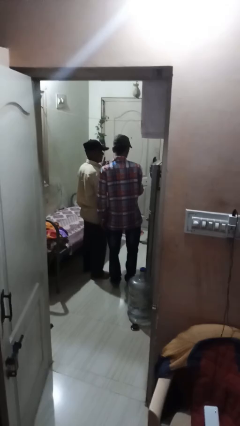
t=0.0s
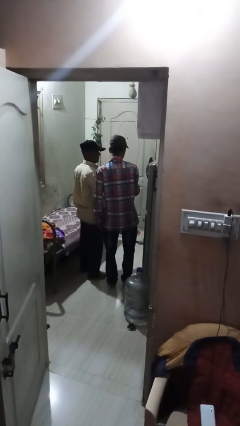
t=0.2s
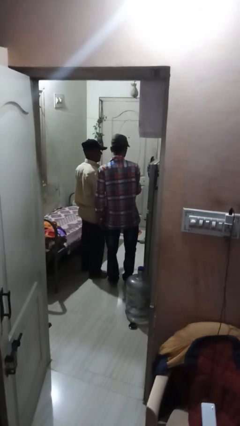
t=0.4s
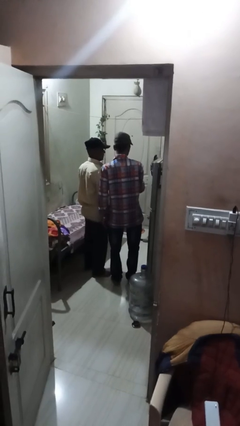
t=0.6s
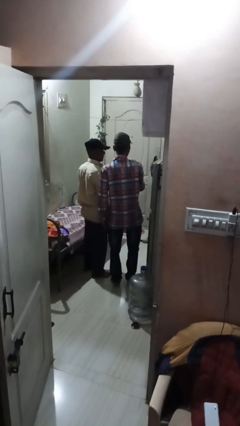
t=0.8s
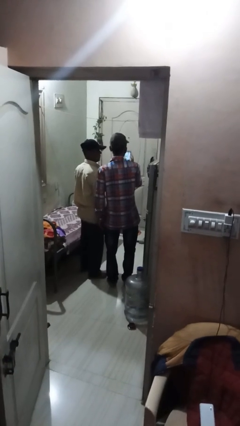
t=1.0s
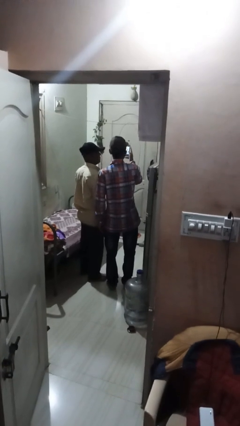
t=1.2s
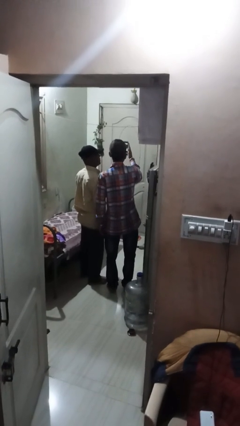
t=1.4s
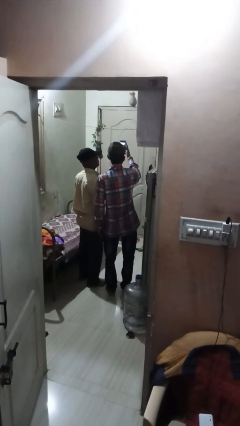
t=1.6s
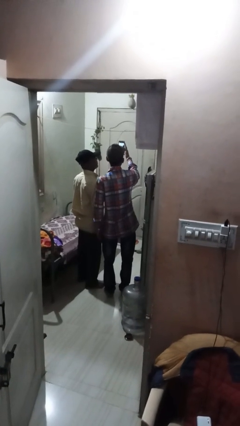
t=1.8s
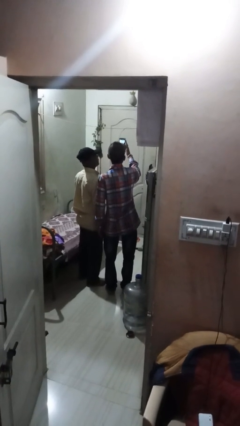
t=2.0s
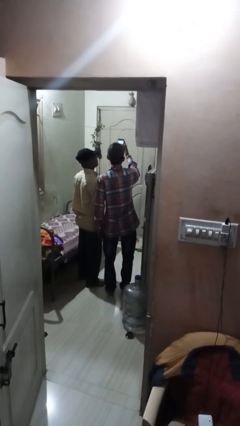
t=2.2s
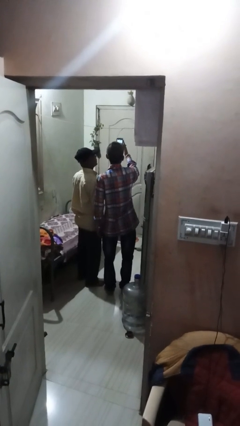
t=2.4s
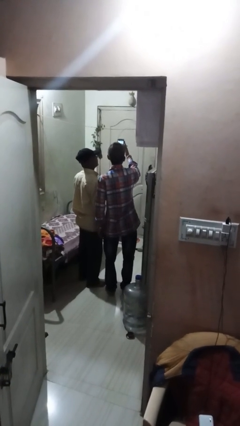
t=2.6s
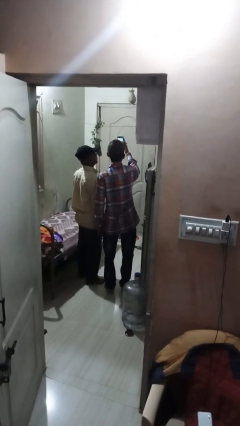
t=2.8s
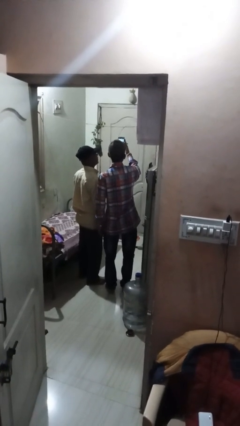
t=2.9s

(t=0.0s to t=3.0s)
person takes selfie with person

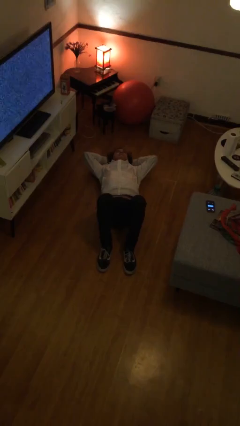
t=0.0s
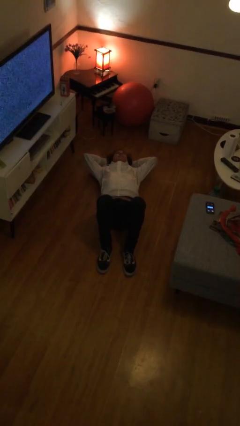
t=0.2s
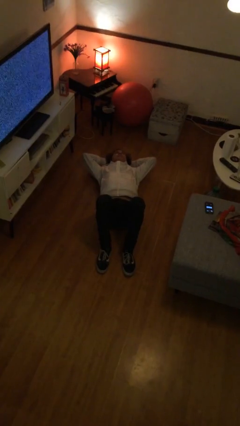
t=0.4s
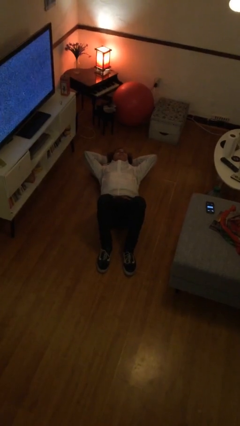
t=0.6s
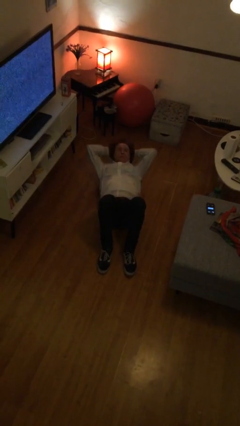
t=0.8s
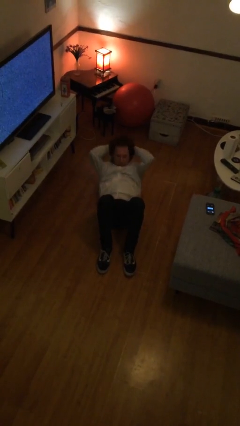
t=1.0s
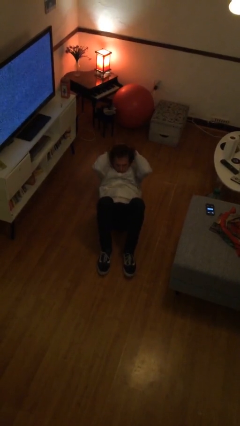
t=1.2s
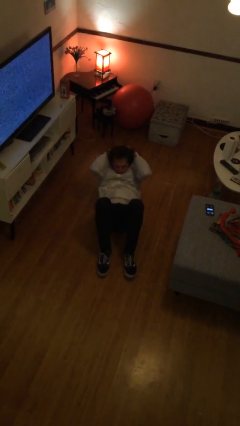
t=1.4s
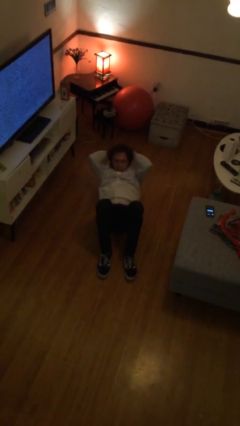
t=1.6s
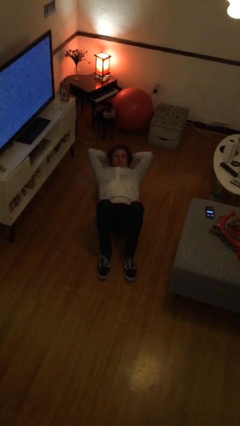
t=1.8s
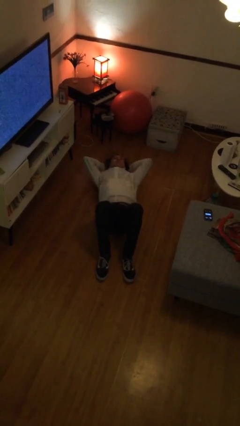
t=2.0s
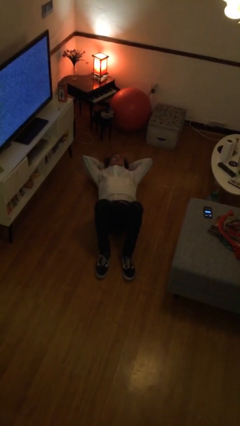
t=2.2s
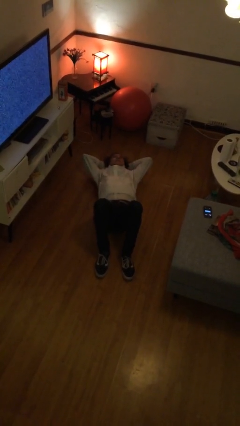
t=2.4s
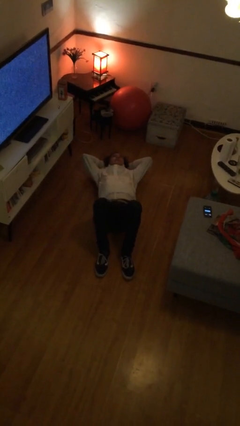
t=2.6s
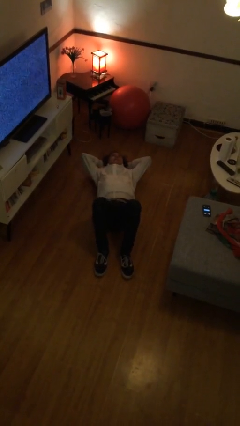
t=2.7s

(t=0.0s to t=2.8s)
person exercises with situp

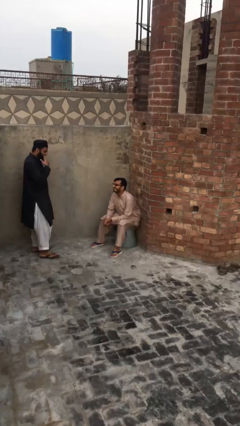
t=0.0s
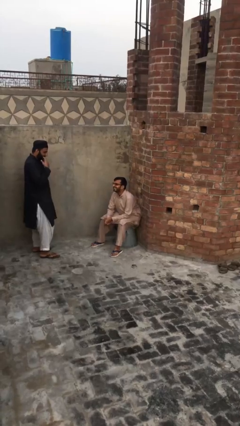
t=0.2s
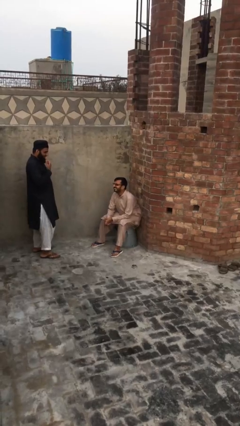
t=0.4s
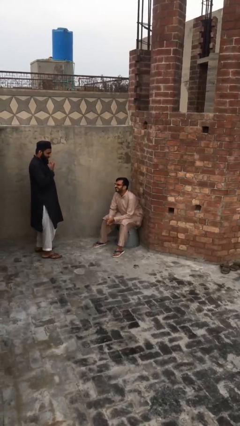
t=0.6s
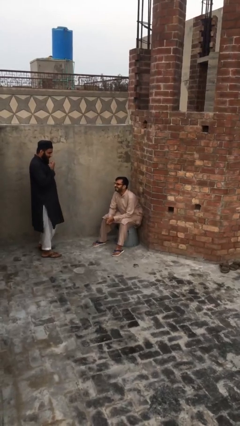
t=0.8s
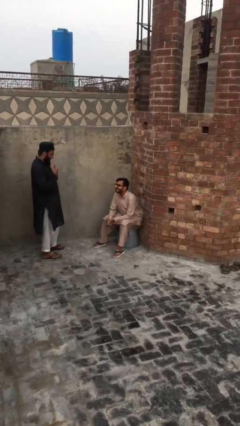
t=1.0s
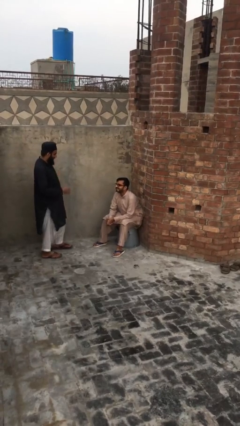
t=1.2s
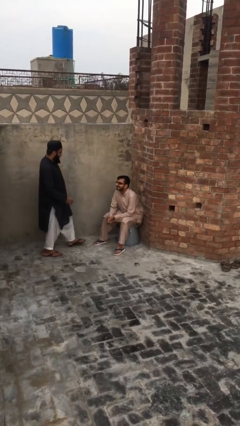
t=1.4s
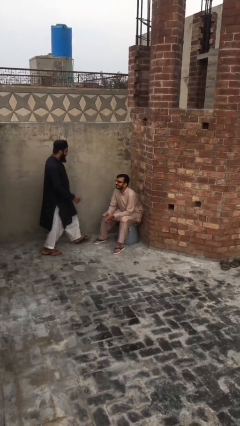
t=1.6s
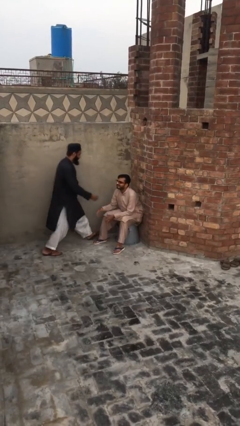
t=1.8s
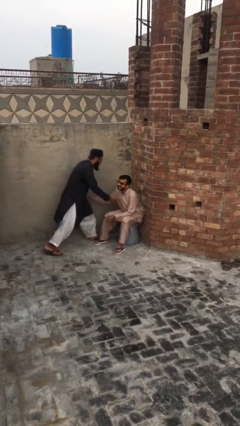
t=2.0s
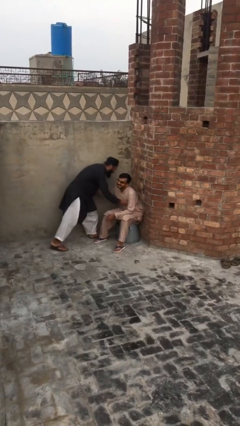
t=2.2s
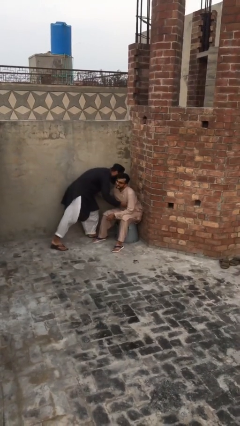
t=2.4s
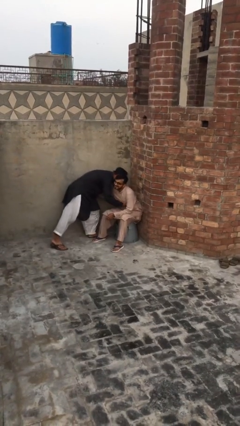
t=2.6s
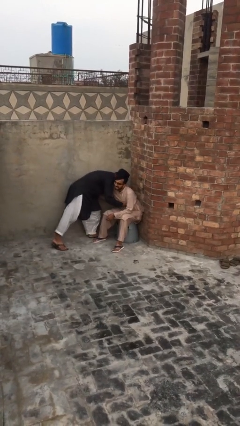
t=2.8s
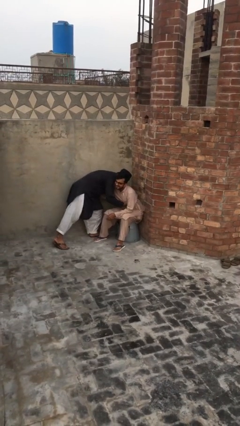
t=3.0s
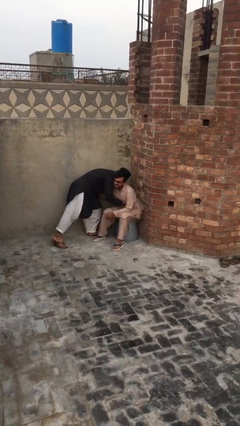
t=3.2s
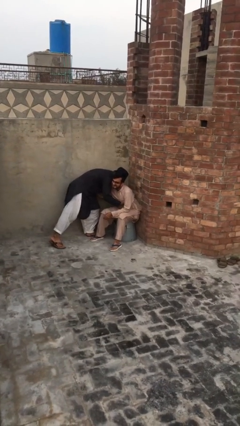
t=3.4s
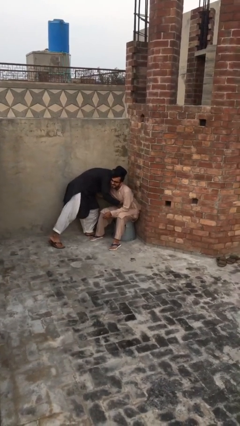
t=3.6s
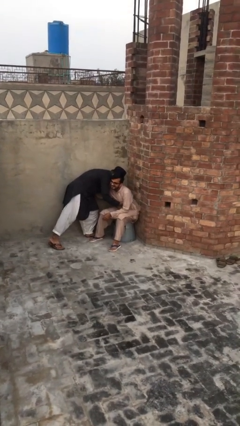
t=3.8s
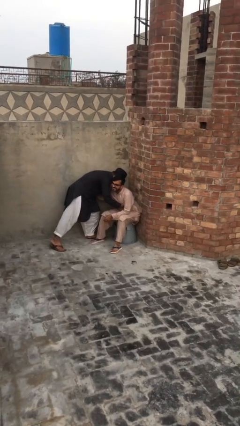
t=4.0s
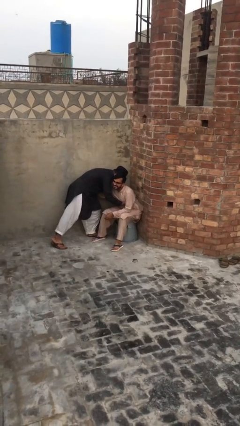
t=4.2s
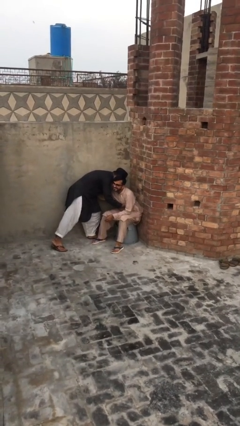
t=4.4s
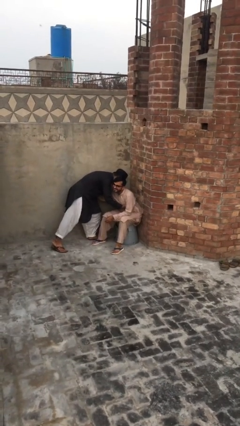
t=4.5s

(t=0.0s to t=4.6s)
person embraces person

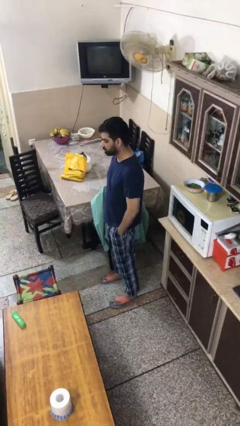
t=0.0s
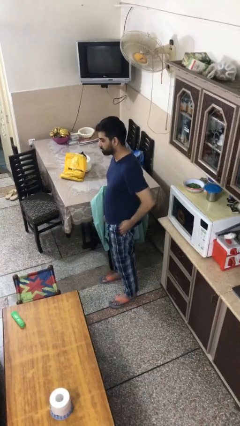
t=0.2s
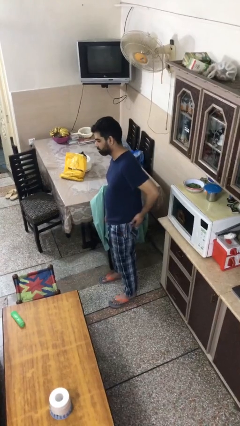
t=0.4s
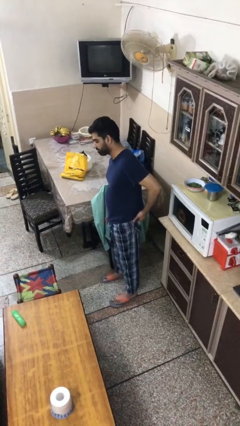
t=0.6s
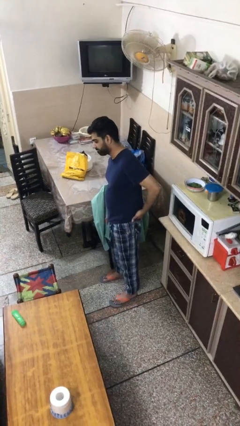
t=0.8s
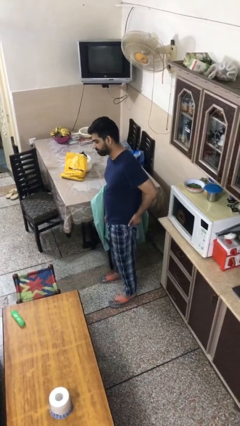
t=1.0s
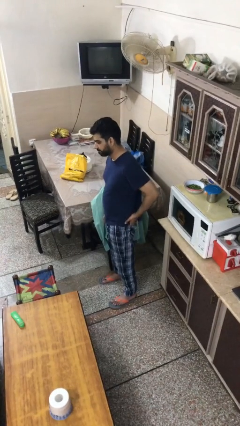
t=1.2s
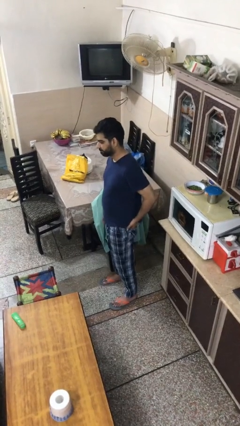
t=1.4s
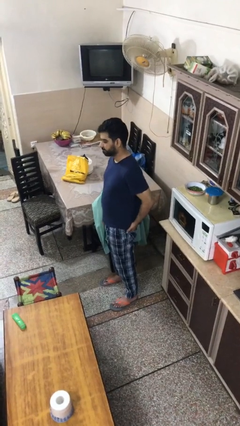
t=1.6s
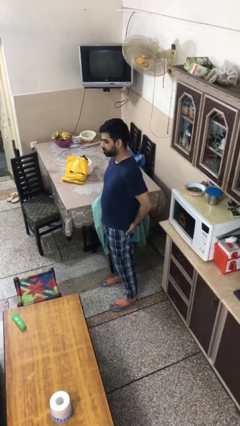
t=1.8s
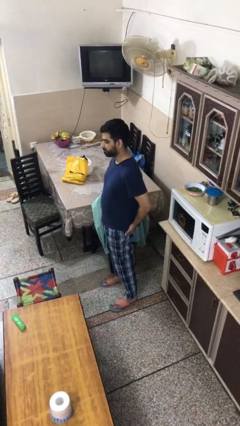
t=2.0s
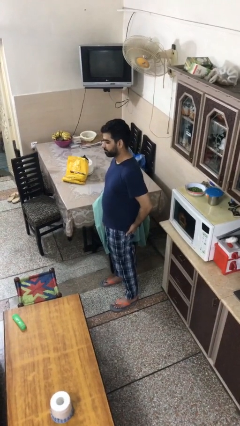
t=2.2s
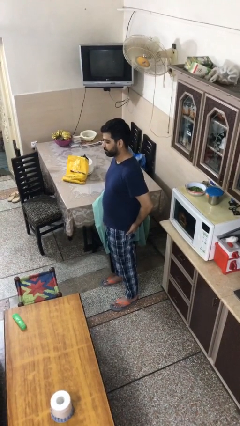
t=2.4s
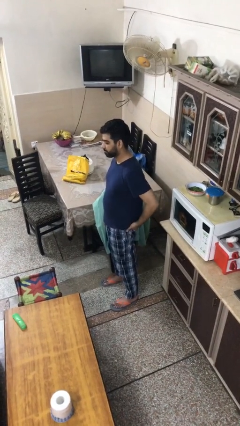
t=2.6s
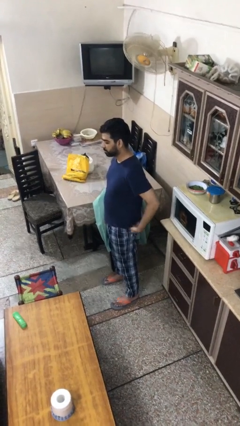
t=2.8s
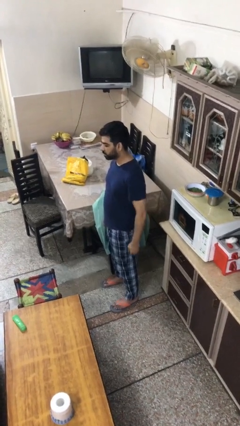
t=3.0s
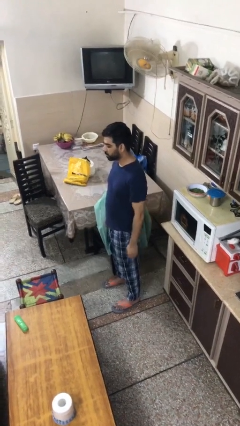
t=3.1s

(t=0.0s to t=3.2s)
person puts hands in back pockets

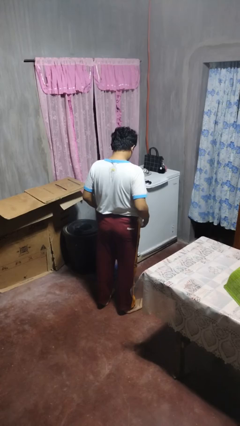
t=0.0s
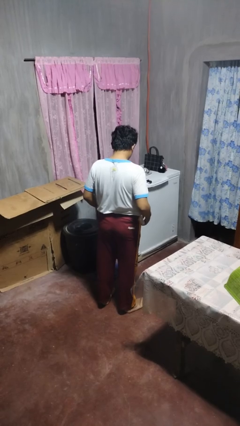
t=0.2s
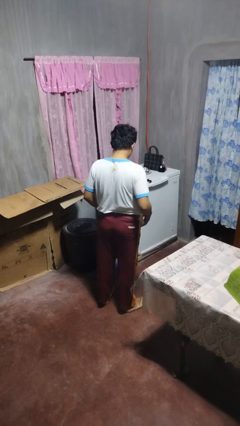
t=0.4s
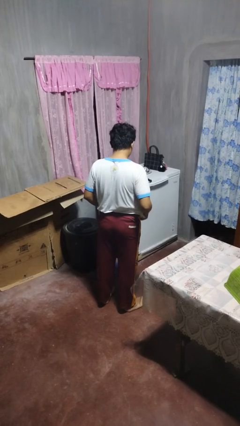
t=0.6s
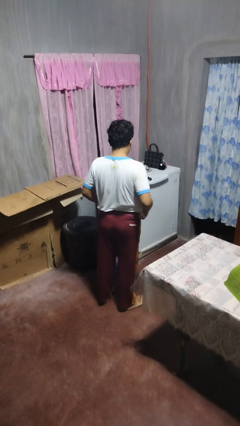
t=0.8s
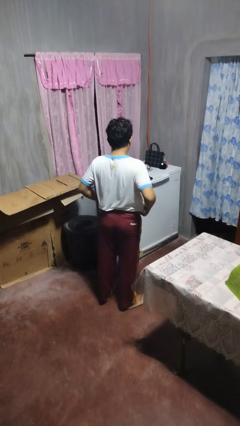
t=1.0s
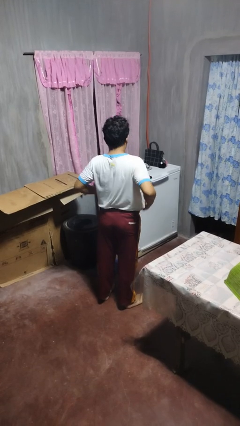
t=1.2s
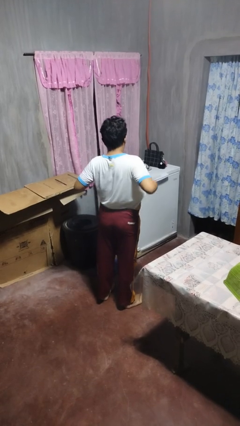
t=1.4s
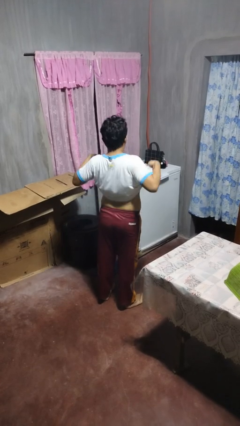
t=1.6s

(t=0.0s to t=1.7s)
person untucks shirt

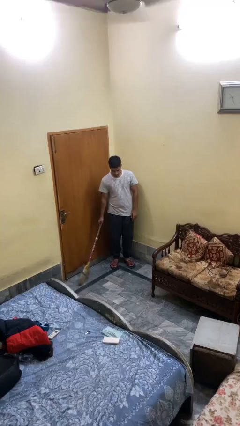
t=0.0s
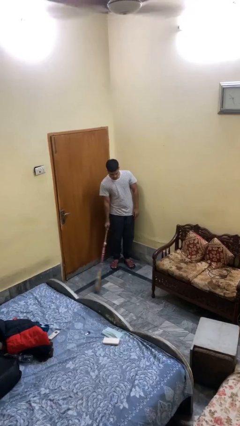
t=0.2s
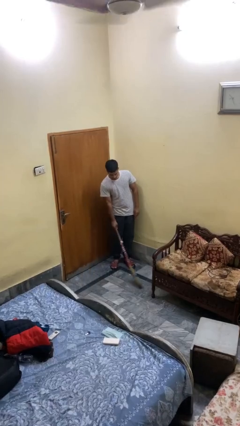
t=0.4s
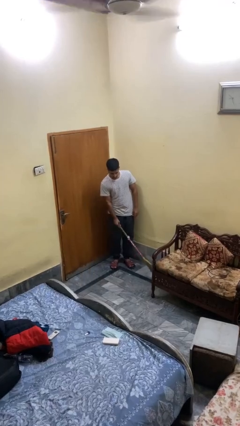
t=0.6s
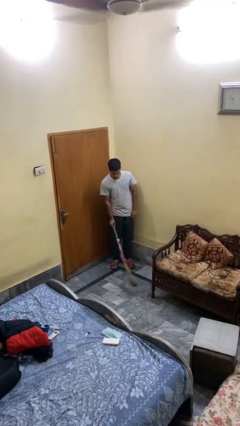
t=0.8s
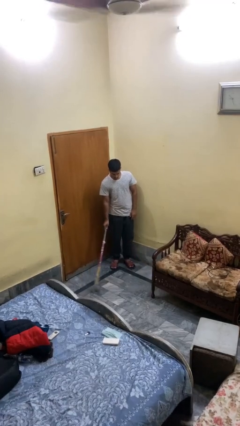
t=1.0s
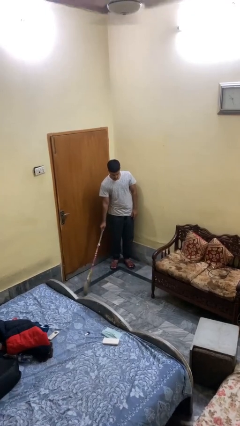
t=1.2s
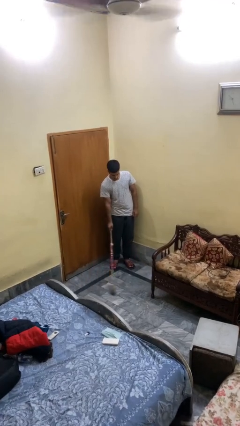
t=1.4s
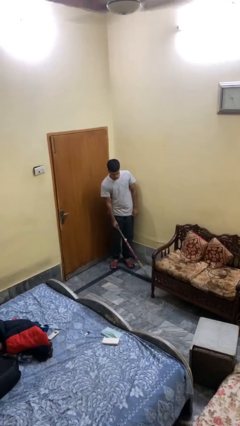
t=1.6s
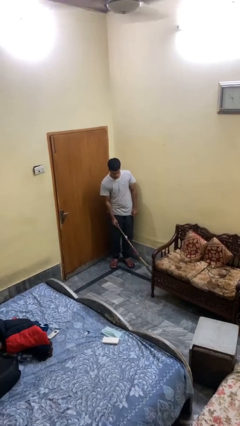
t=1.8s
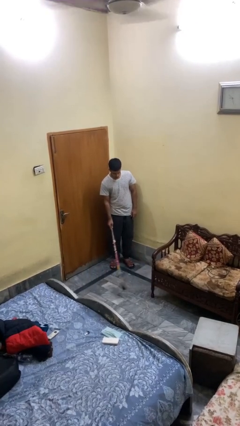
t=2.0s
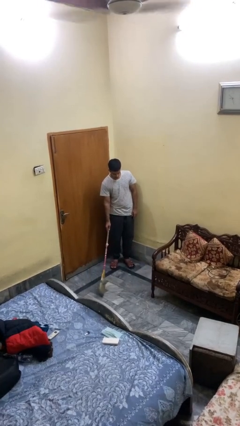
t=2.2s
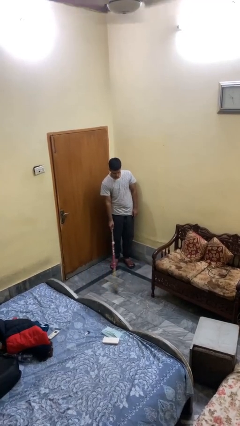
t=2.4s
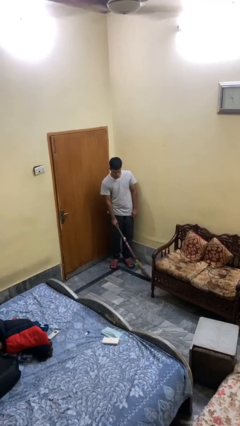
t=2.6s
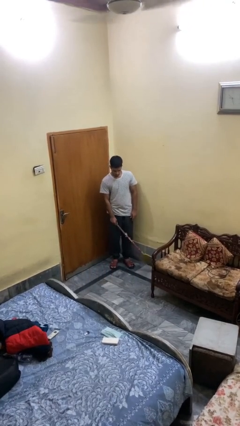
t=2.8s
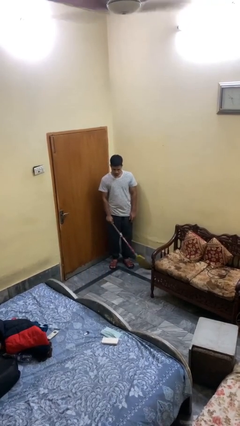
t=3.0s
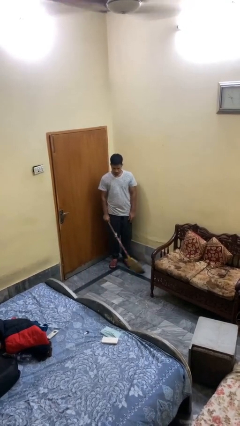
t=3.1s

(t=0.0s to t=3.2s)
person sweeps floor
